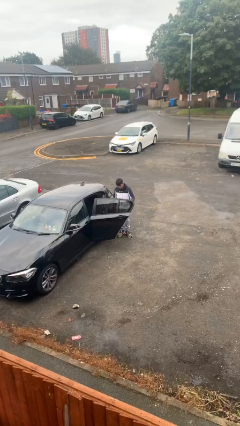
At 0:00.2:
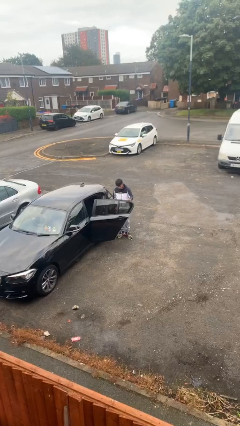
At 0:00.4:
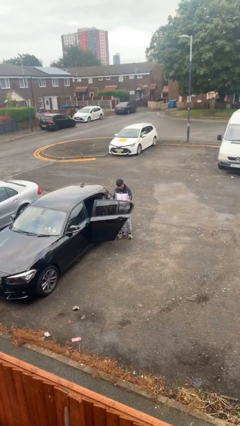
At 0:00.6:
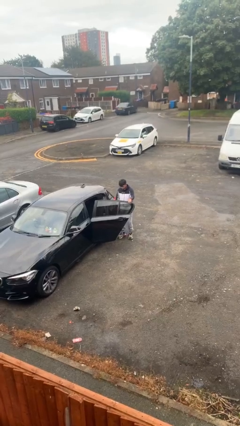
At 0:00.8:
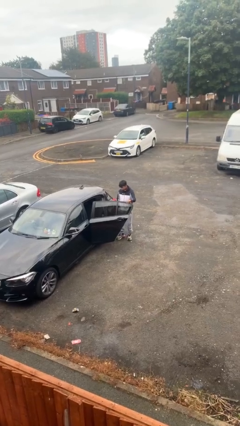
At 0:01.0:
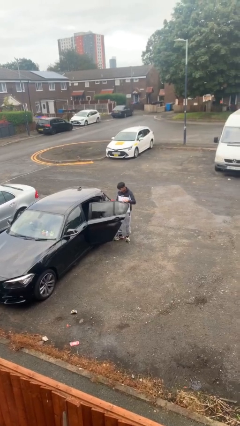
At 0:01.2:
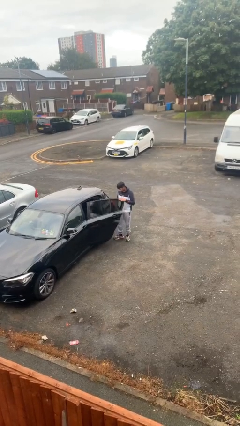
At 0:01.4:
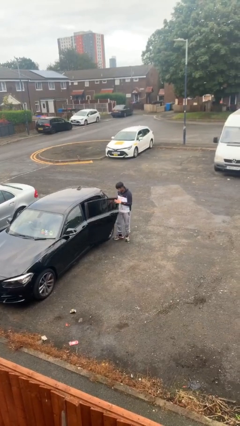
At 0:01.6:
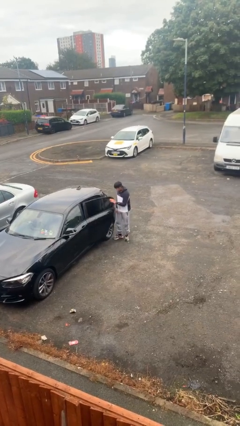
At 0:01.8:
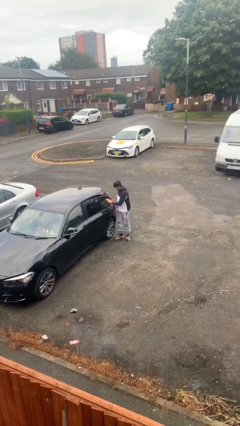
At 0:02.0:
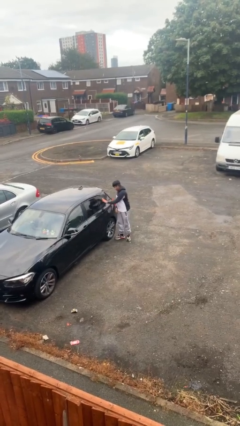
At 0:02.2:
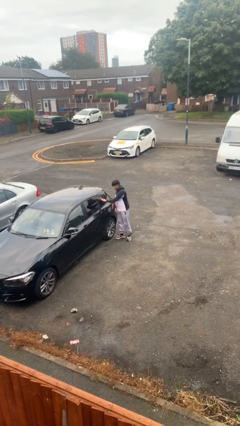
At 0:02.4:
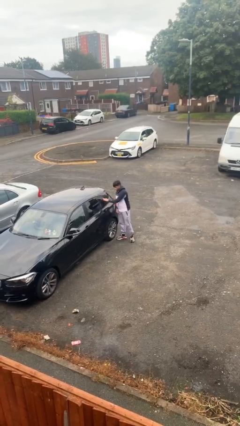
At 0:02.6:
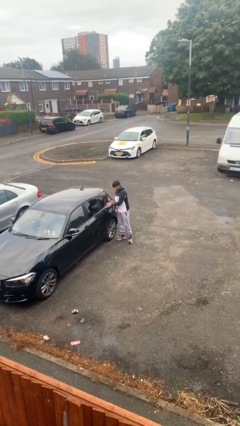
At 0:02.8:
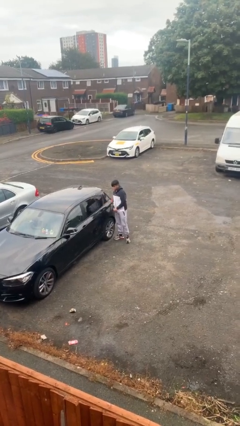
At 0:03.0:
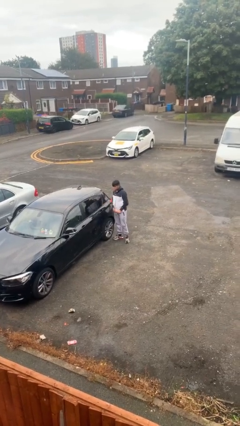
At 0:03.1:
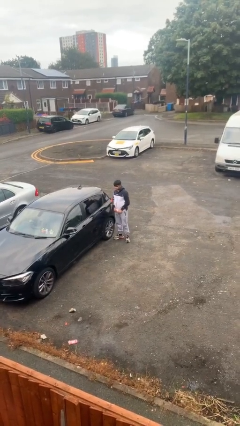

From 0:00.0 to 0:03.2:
person closes car door

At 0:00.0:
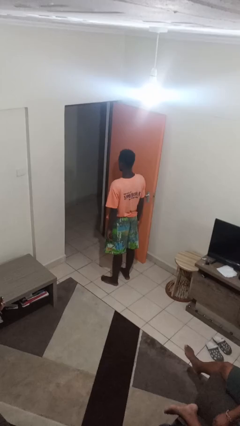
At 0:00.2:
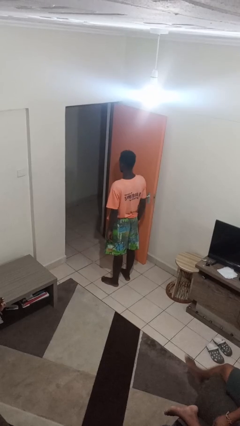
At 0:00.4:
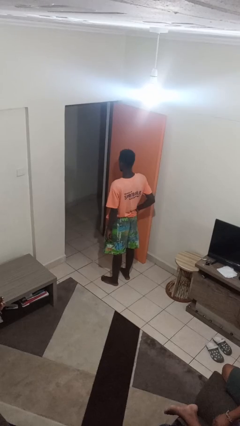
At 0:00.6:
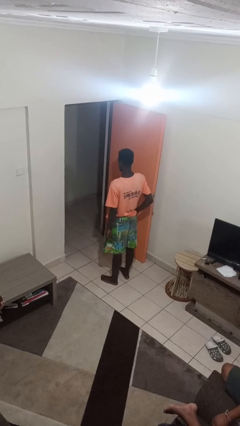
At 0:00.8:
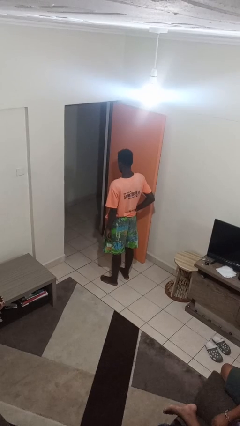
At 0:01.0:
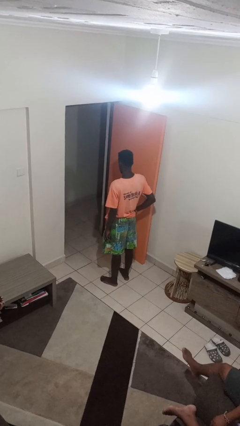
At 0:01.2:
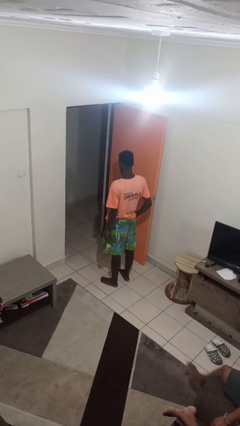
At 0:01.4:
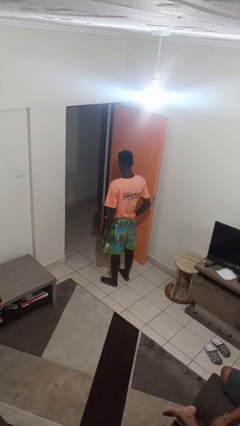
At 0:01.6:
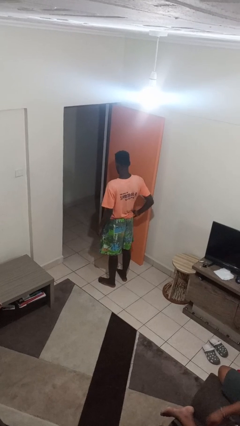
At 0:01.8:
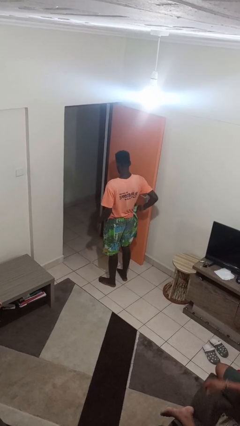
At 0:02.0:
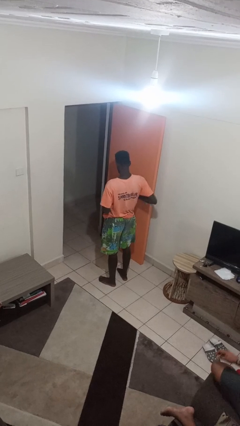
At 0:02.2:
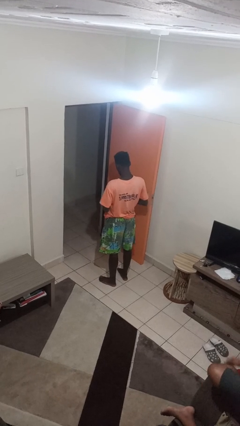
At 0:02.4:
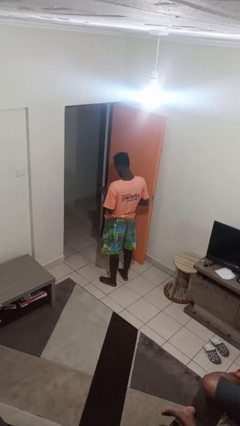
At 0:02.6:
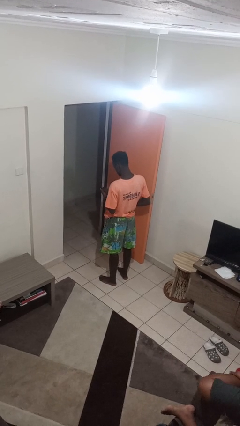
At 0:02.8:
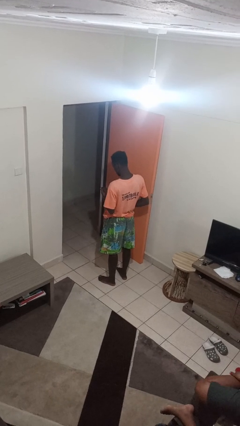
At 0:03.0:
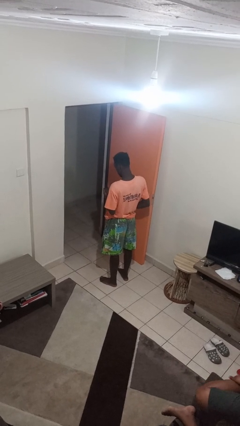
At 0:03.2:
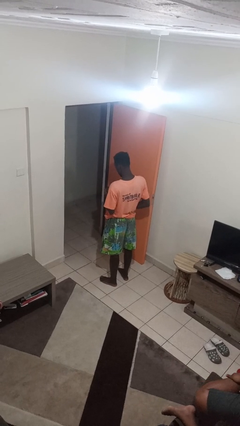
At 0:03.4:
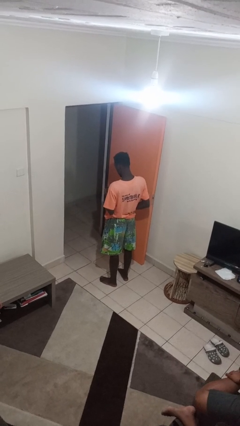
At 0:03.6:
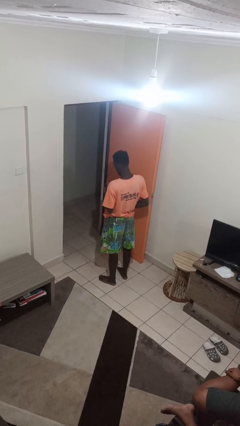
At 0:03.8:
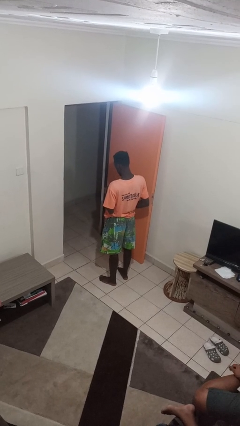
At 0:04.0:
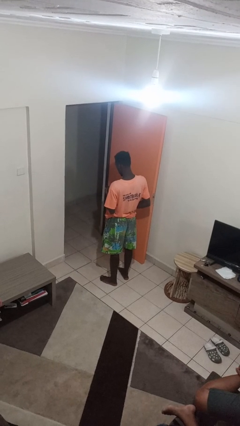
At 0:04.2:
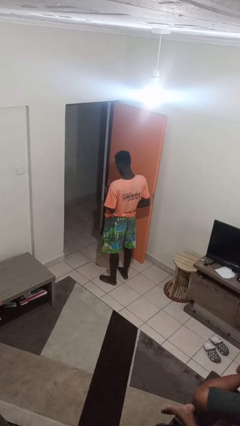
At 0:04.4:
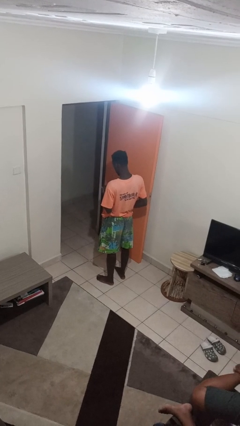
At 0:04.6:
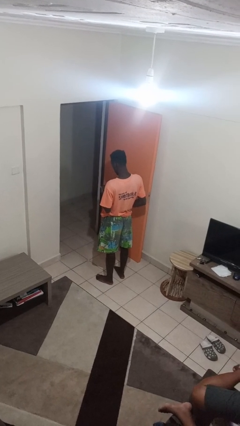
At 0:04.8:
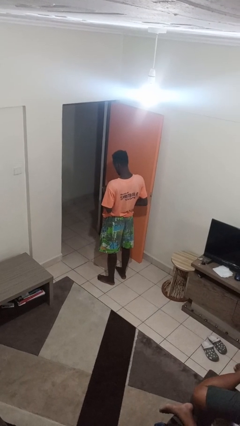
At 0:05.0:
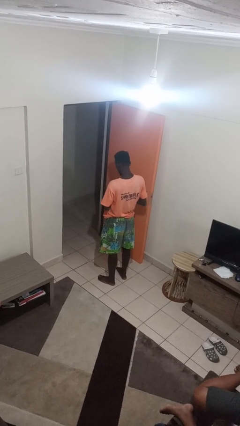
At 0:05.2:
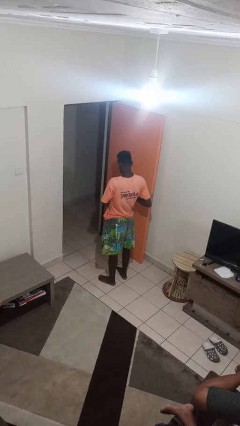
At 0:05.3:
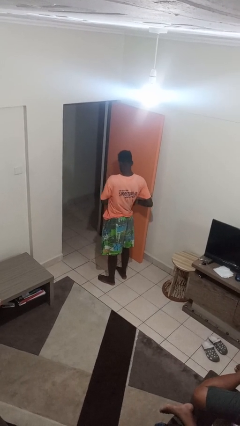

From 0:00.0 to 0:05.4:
person takes phone from pocket

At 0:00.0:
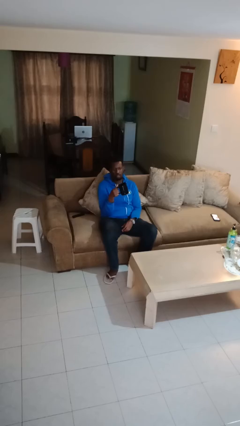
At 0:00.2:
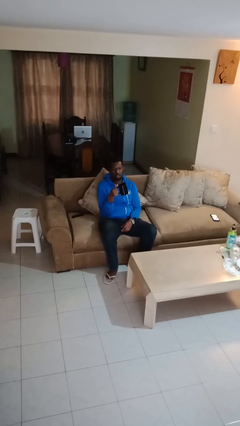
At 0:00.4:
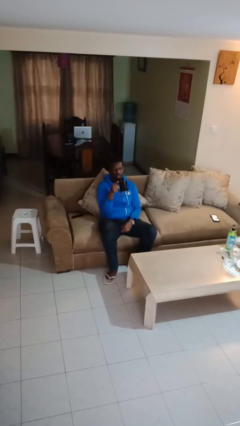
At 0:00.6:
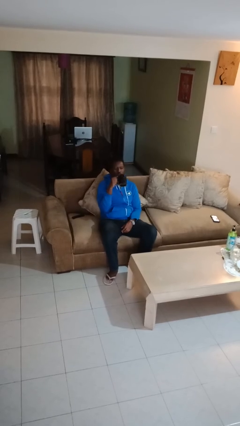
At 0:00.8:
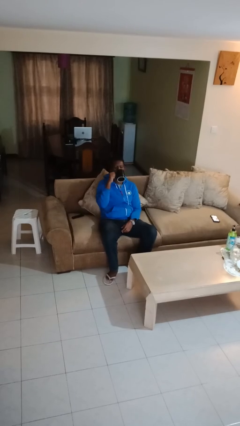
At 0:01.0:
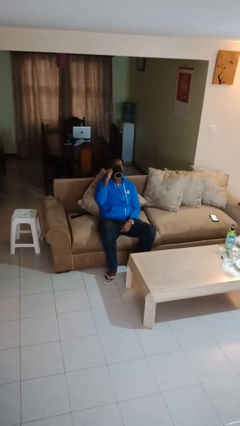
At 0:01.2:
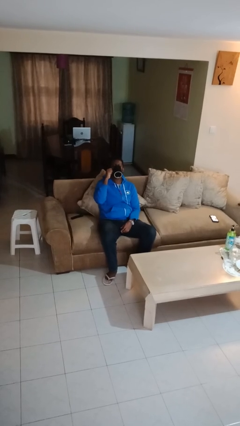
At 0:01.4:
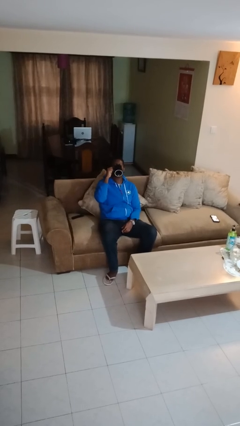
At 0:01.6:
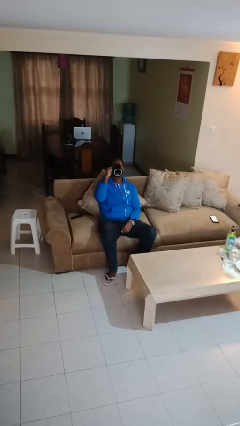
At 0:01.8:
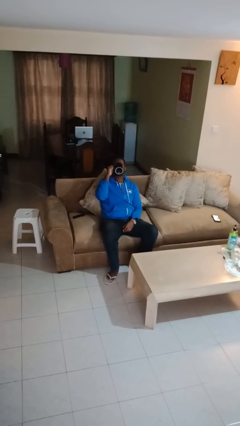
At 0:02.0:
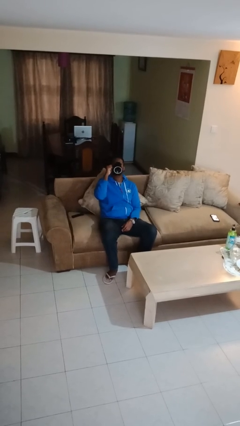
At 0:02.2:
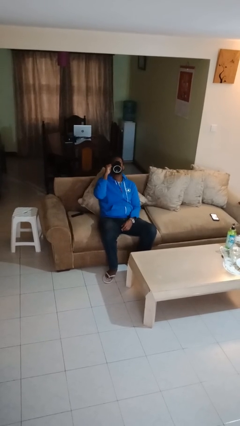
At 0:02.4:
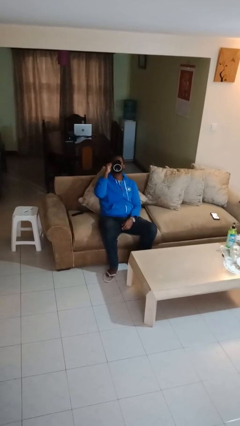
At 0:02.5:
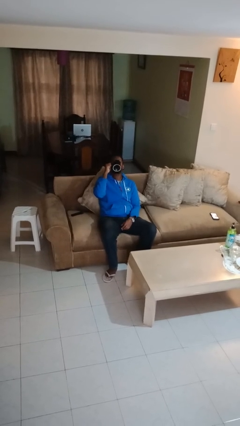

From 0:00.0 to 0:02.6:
person drinks from mug

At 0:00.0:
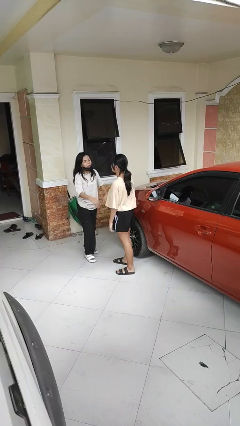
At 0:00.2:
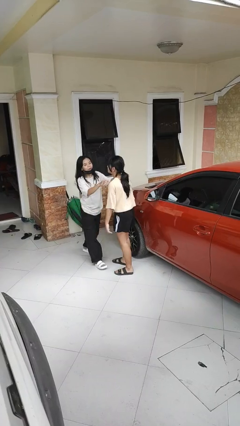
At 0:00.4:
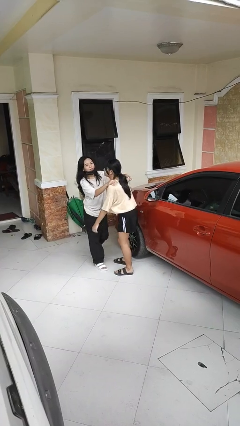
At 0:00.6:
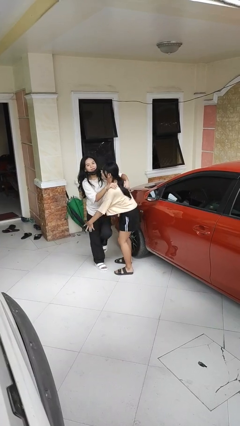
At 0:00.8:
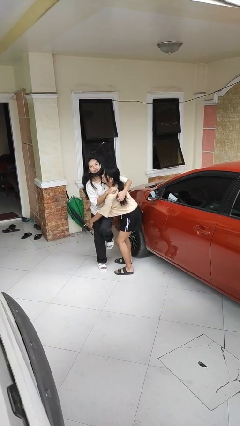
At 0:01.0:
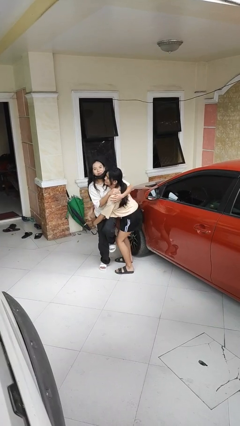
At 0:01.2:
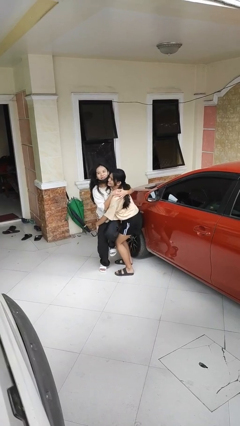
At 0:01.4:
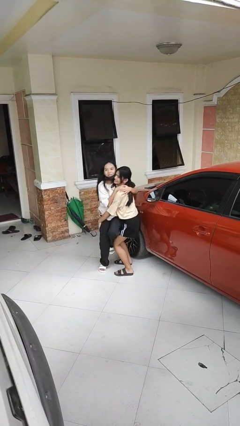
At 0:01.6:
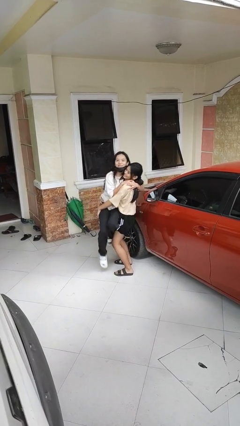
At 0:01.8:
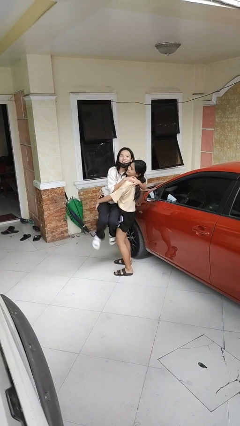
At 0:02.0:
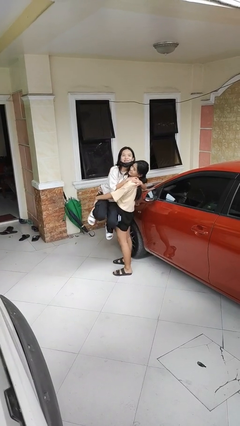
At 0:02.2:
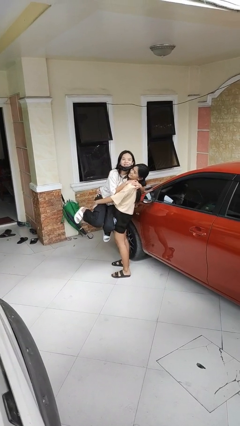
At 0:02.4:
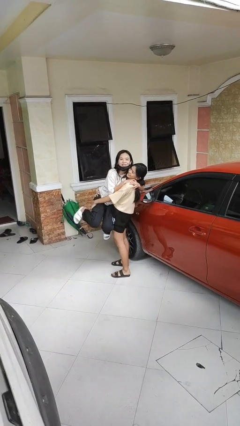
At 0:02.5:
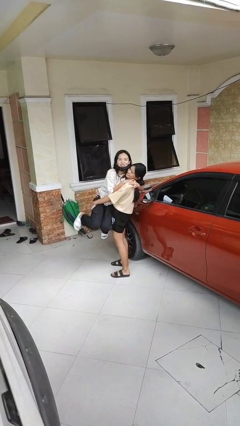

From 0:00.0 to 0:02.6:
person picks up person

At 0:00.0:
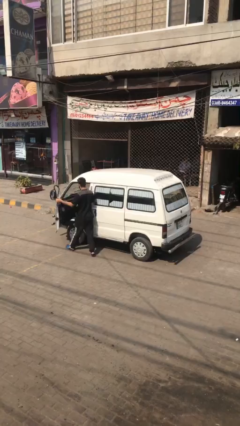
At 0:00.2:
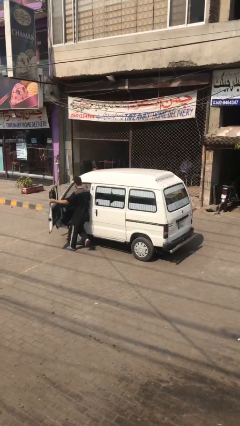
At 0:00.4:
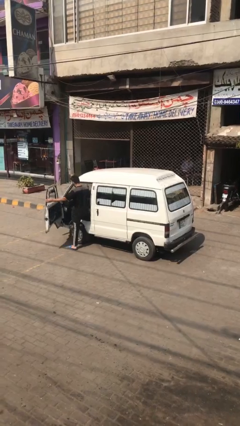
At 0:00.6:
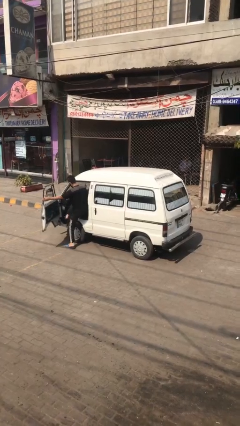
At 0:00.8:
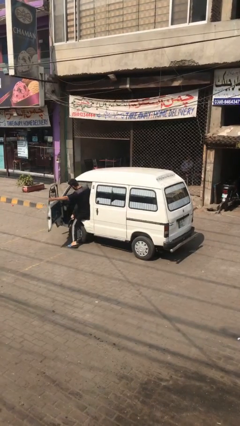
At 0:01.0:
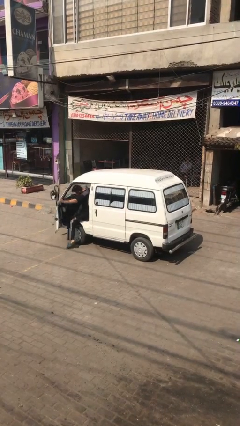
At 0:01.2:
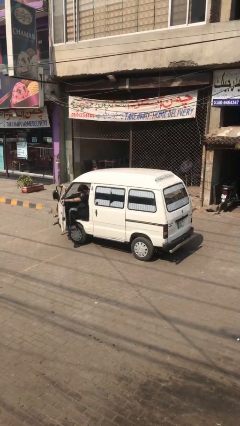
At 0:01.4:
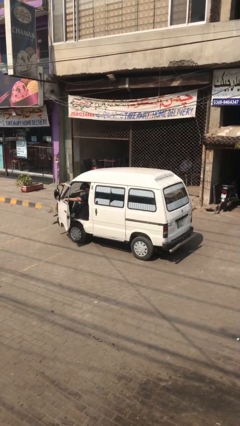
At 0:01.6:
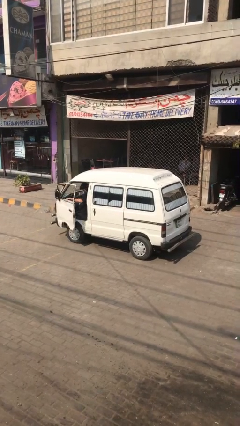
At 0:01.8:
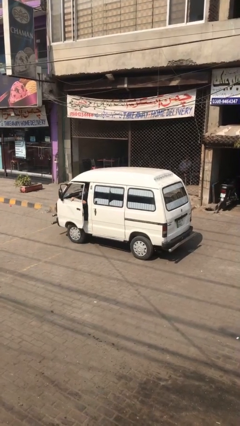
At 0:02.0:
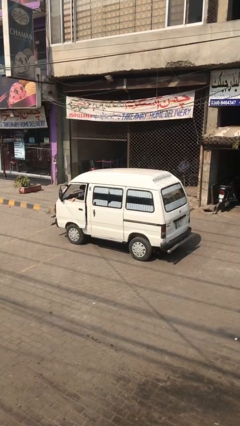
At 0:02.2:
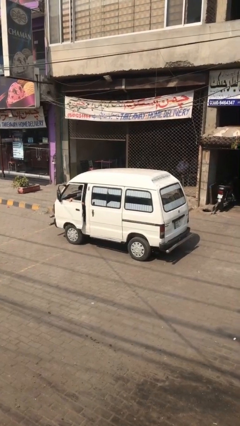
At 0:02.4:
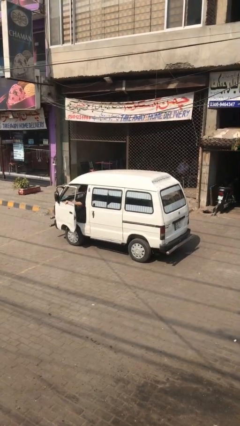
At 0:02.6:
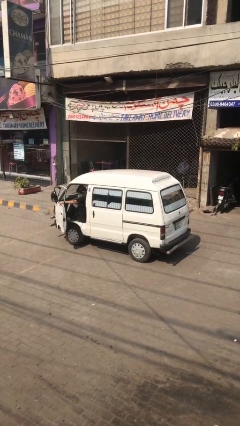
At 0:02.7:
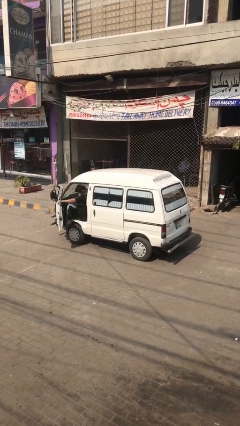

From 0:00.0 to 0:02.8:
car picks up person

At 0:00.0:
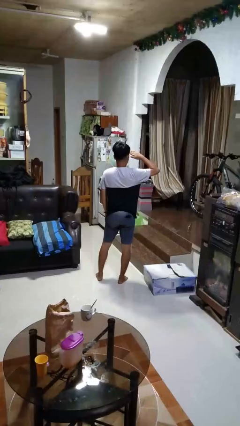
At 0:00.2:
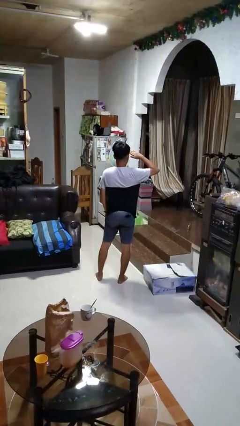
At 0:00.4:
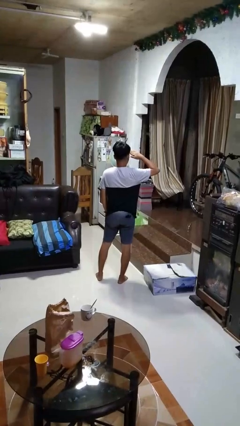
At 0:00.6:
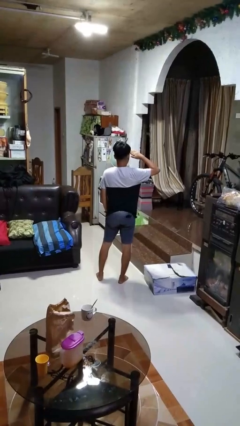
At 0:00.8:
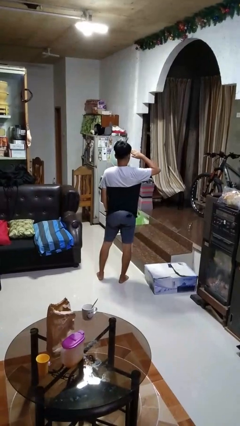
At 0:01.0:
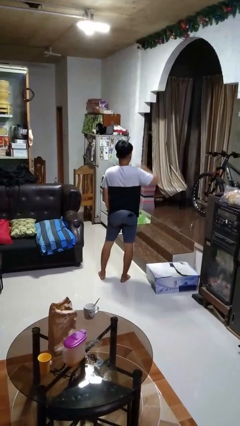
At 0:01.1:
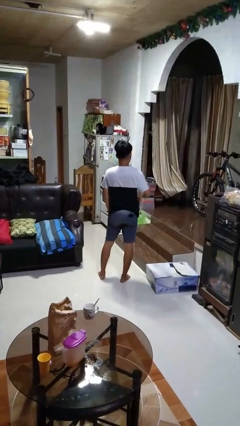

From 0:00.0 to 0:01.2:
person salutes
